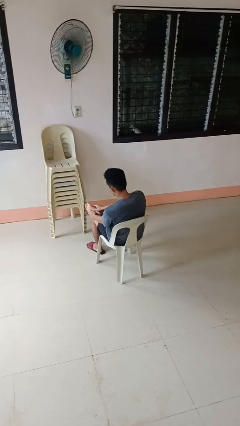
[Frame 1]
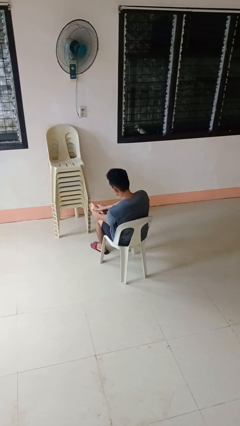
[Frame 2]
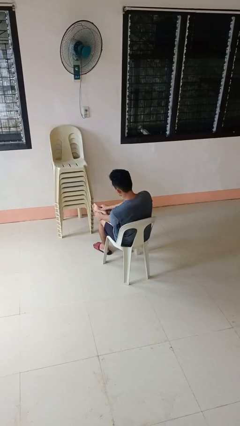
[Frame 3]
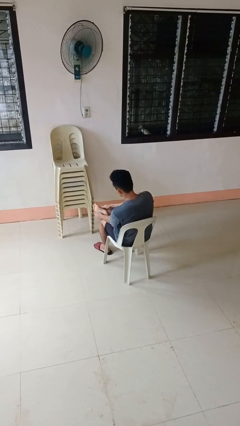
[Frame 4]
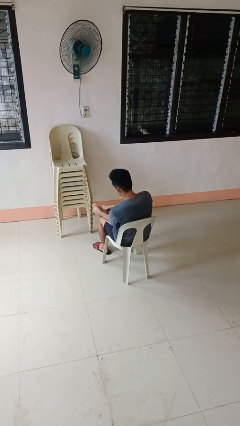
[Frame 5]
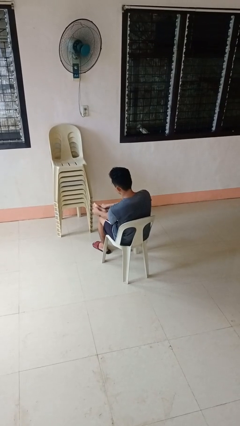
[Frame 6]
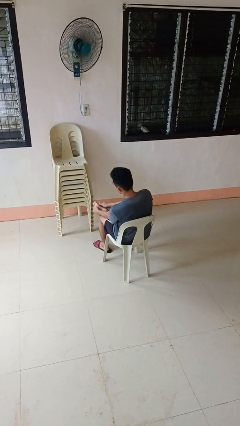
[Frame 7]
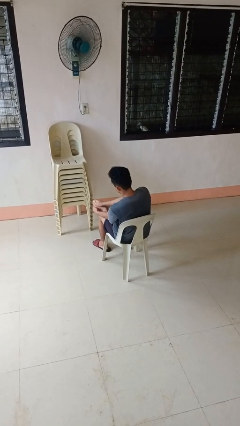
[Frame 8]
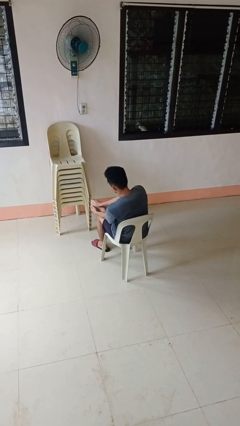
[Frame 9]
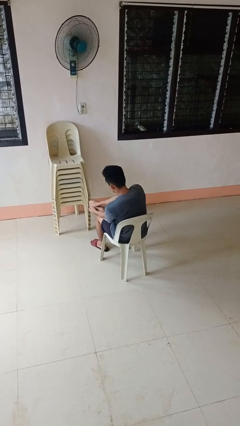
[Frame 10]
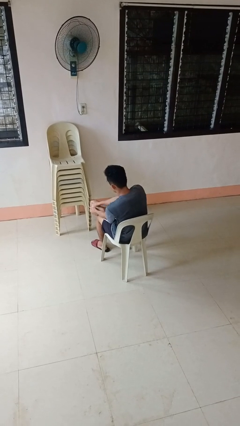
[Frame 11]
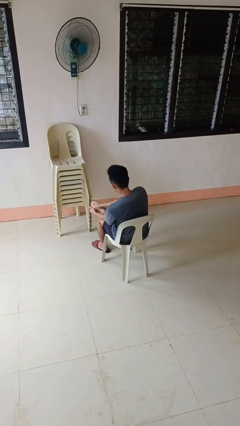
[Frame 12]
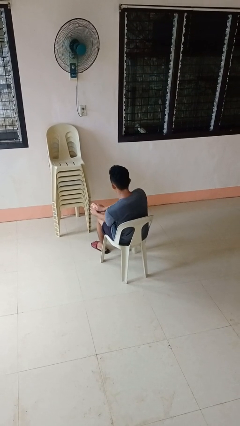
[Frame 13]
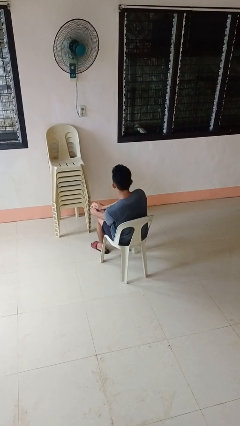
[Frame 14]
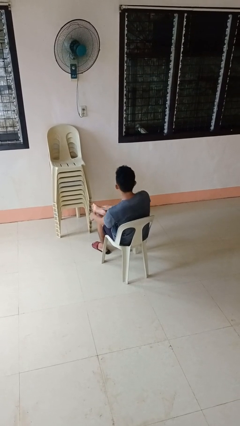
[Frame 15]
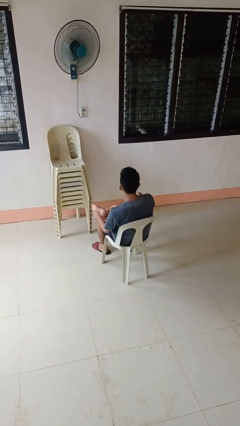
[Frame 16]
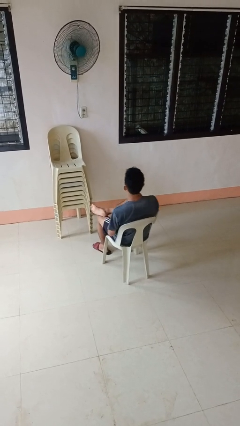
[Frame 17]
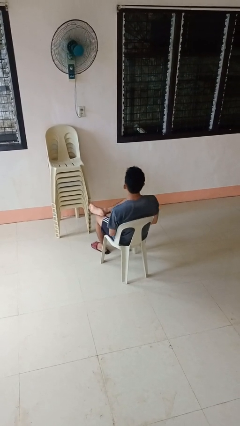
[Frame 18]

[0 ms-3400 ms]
person rubs foot

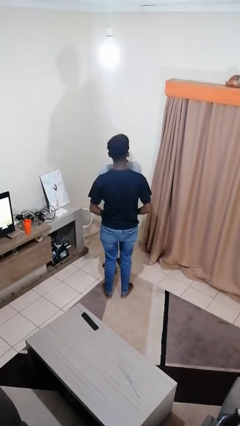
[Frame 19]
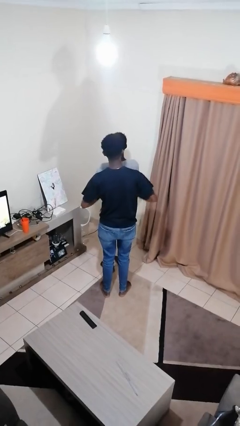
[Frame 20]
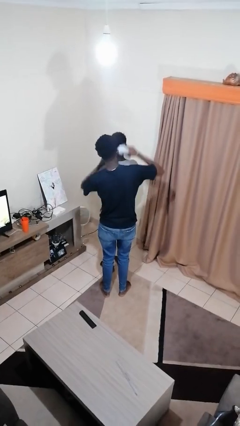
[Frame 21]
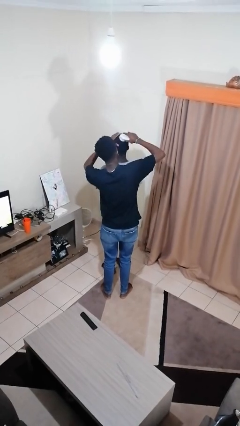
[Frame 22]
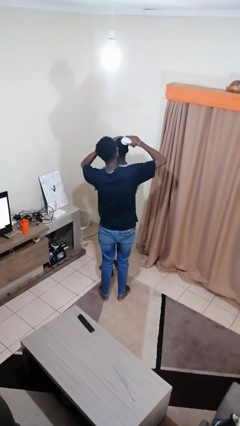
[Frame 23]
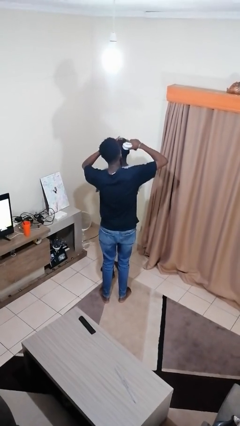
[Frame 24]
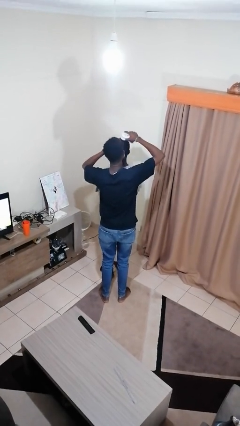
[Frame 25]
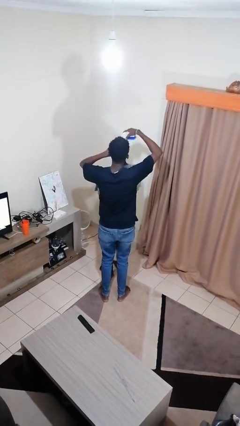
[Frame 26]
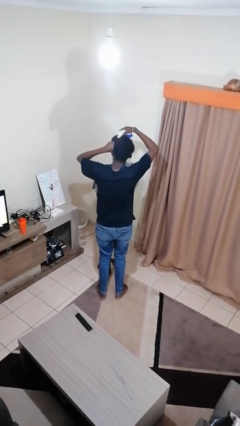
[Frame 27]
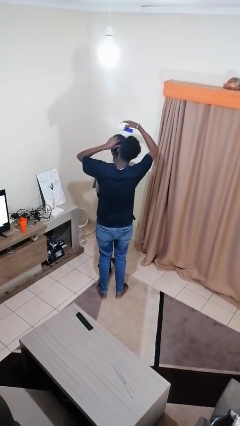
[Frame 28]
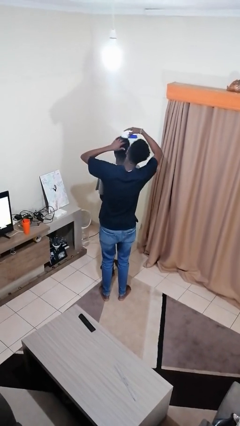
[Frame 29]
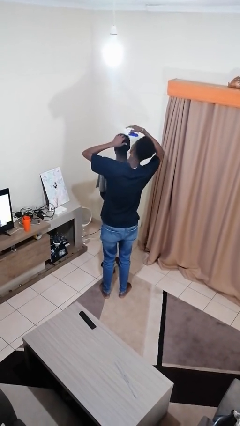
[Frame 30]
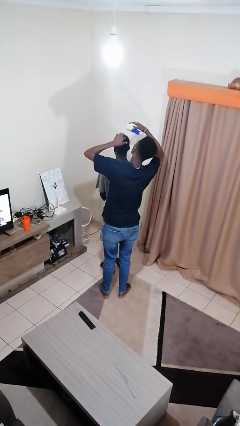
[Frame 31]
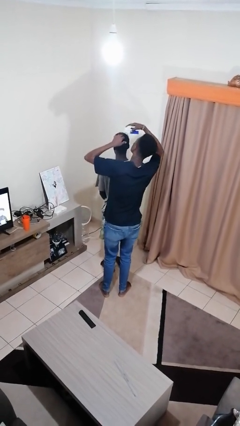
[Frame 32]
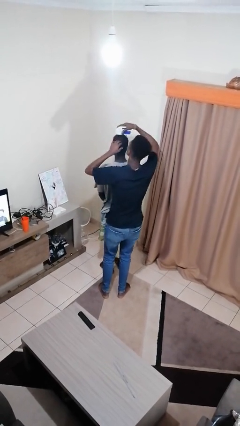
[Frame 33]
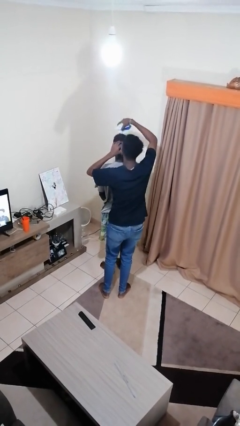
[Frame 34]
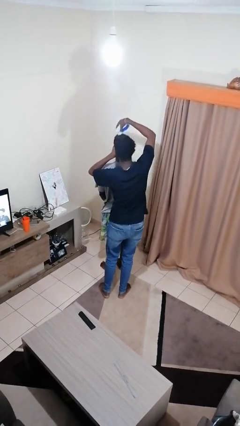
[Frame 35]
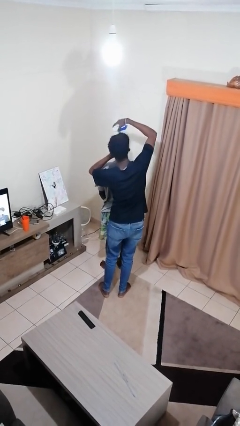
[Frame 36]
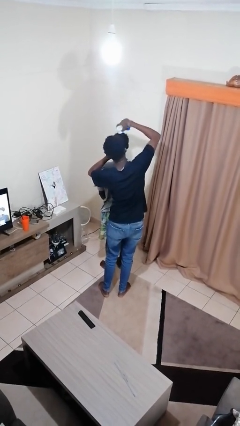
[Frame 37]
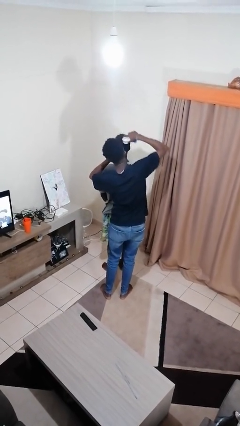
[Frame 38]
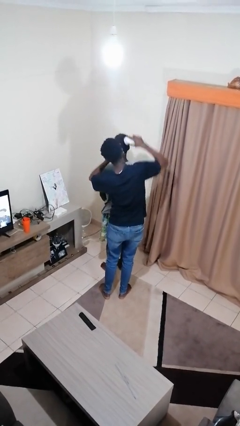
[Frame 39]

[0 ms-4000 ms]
person brushes hair of person

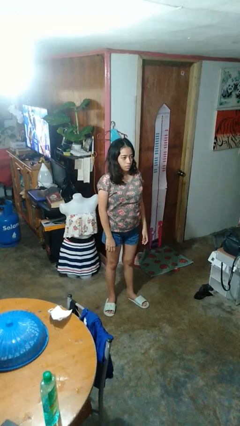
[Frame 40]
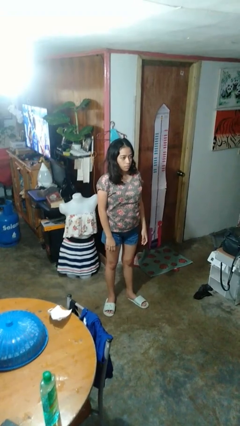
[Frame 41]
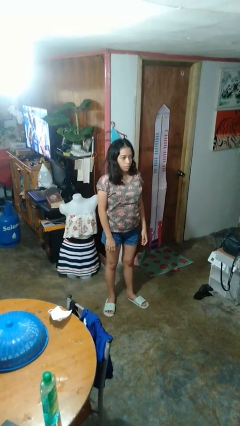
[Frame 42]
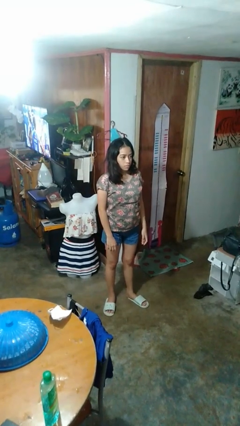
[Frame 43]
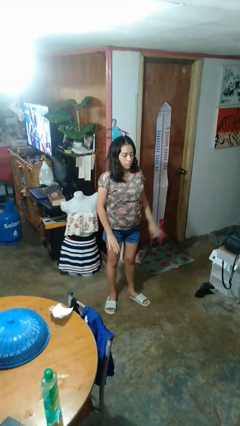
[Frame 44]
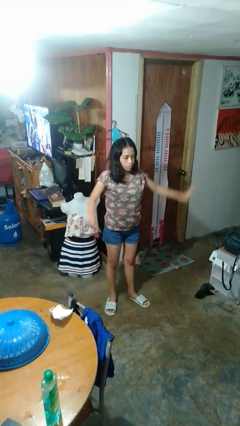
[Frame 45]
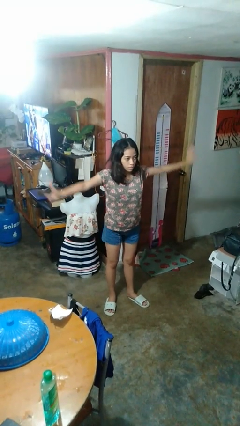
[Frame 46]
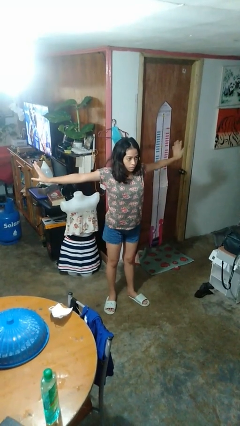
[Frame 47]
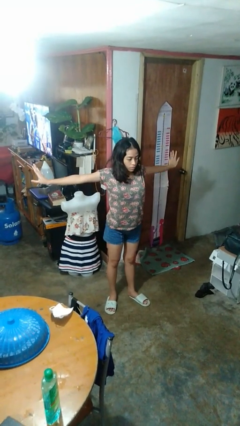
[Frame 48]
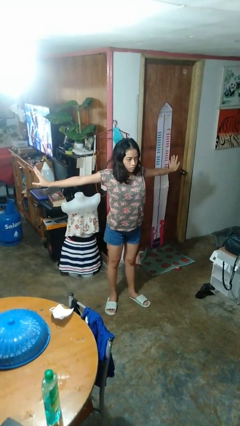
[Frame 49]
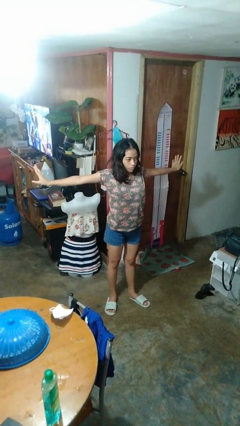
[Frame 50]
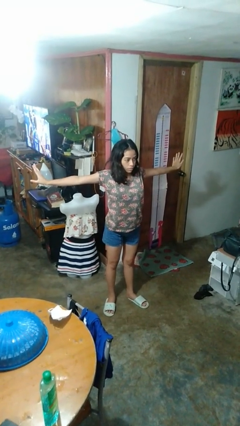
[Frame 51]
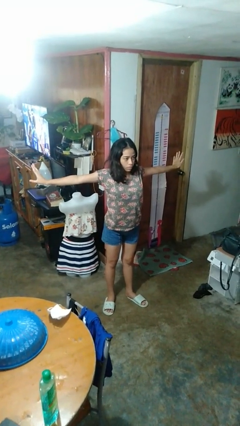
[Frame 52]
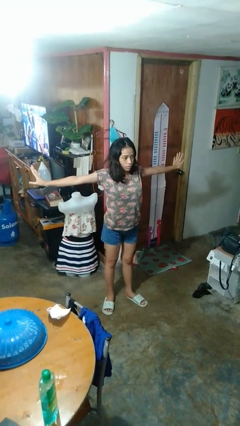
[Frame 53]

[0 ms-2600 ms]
person stretches arms to side

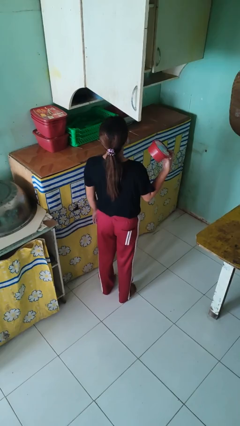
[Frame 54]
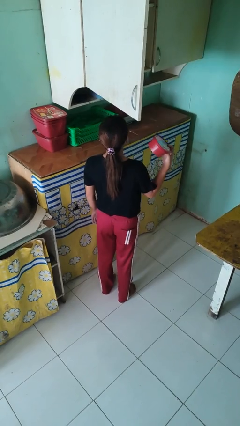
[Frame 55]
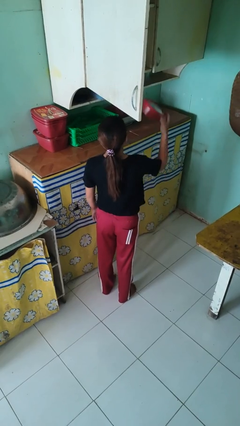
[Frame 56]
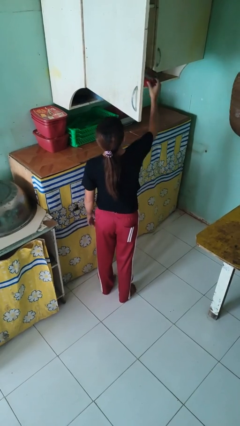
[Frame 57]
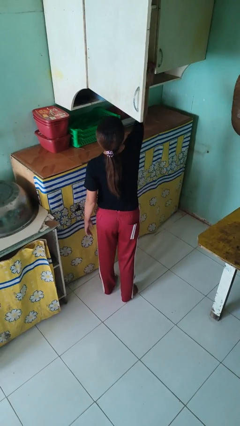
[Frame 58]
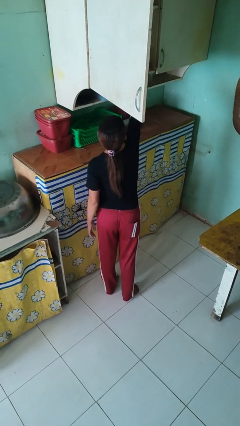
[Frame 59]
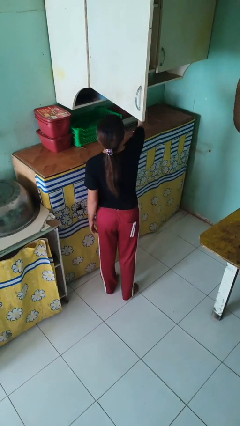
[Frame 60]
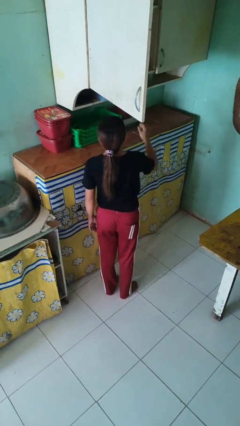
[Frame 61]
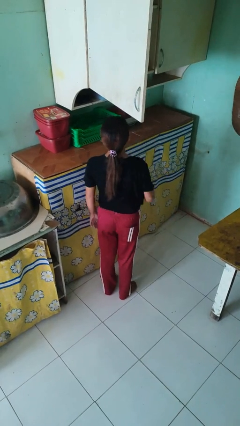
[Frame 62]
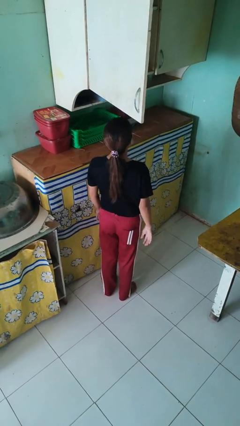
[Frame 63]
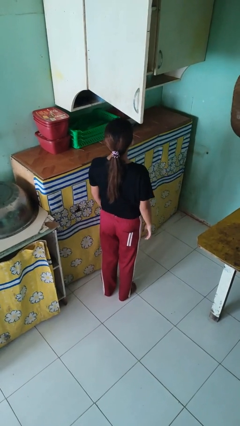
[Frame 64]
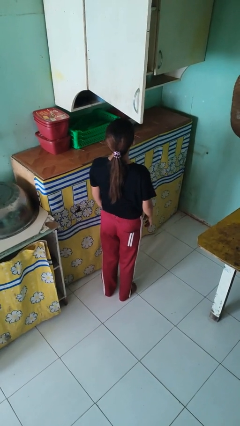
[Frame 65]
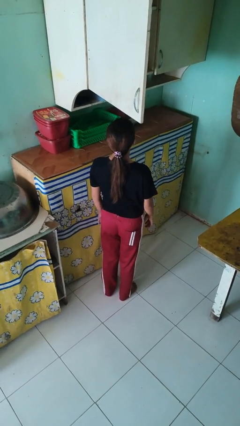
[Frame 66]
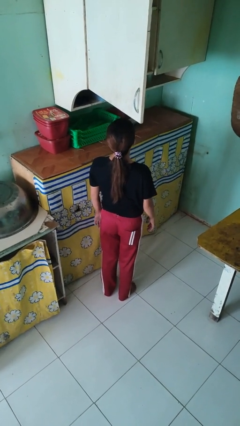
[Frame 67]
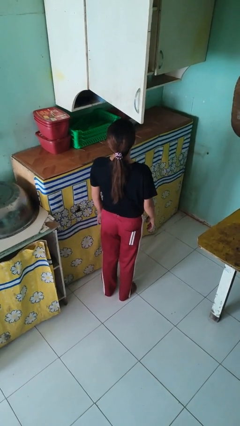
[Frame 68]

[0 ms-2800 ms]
person puts object in cabinet

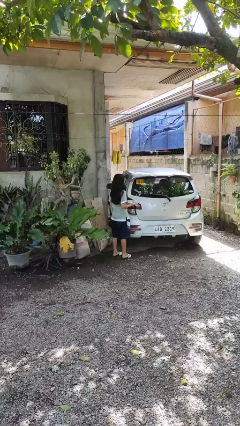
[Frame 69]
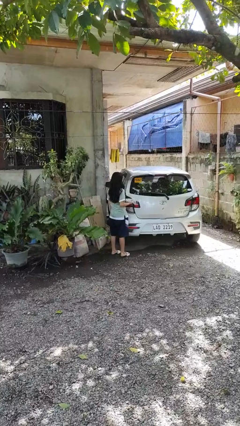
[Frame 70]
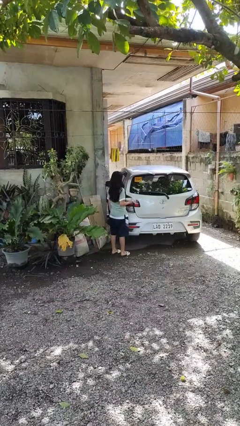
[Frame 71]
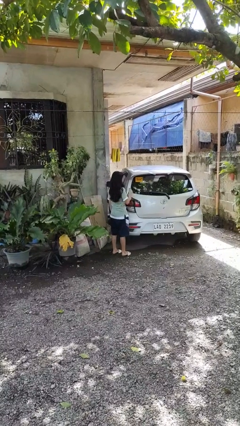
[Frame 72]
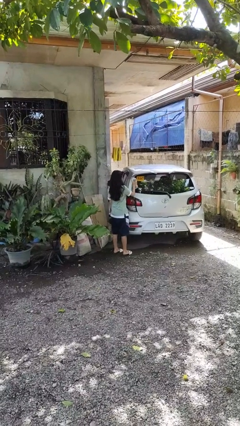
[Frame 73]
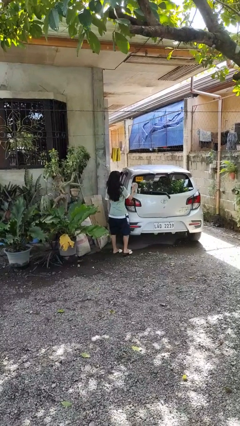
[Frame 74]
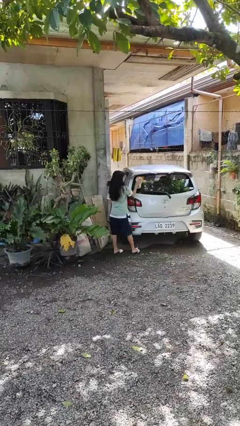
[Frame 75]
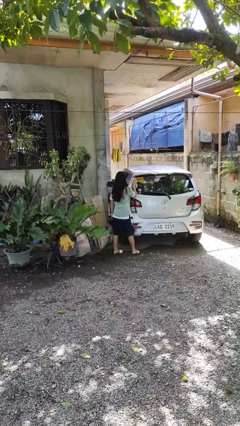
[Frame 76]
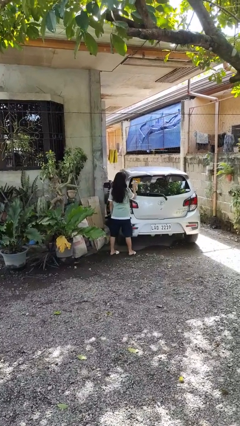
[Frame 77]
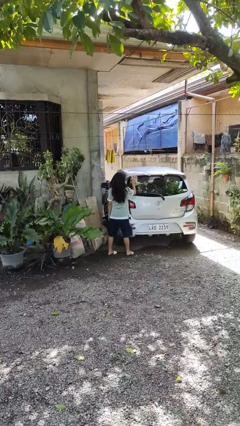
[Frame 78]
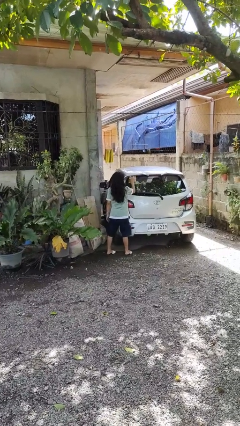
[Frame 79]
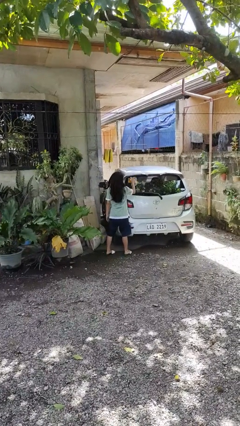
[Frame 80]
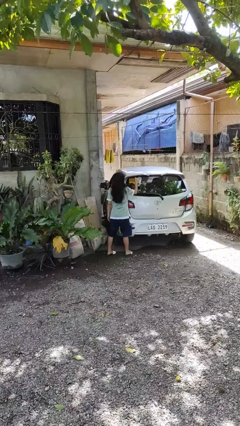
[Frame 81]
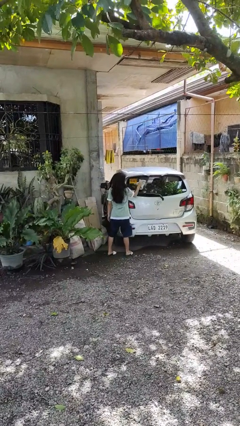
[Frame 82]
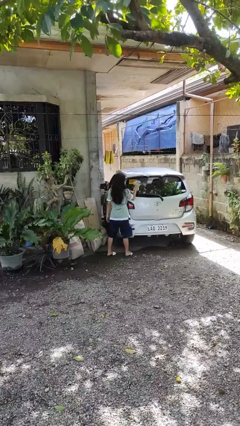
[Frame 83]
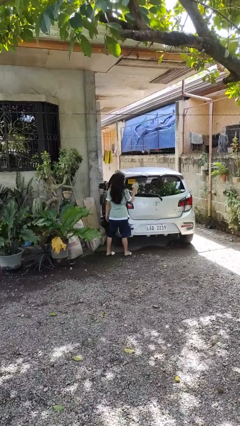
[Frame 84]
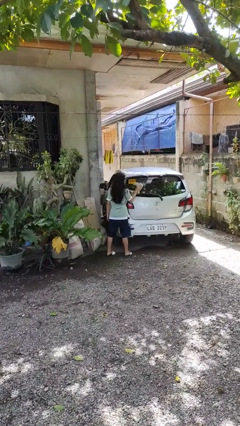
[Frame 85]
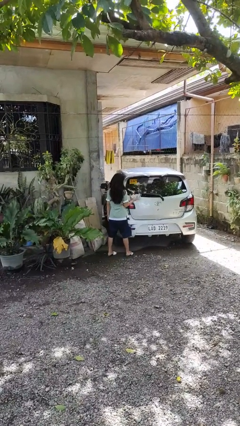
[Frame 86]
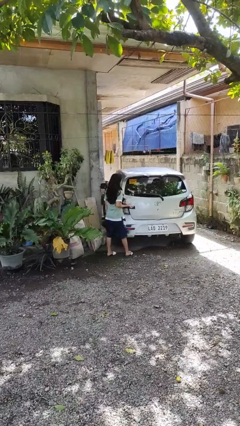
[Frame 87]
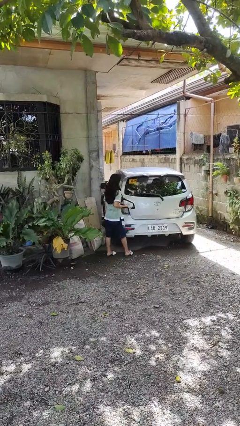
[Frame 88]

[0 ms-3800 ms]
person polishes car with rag

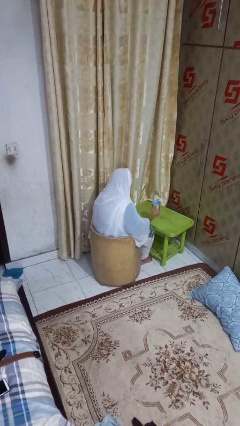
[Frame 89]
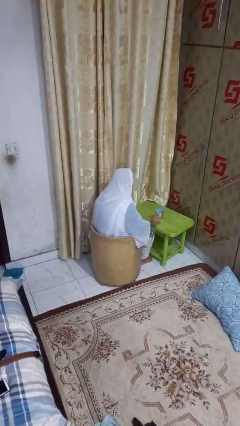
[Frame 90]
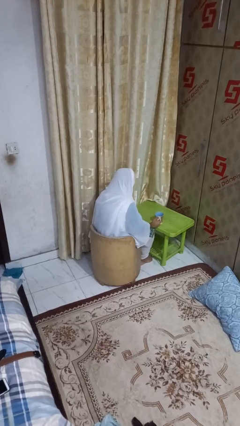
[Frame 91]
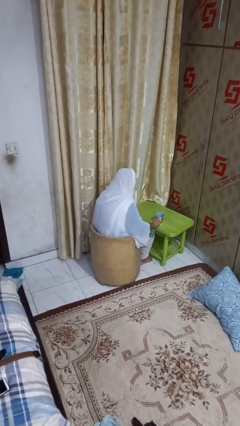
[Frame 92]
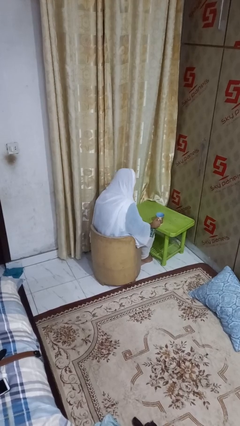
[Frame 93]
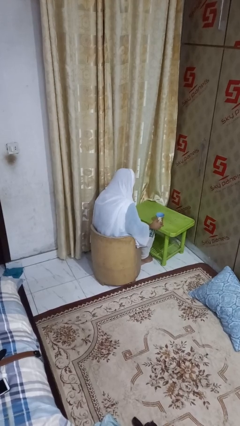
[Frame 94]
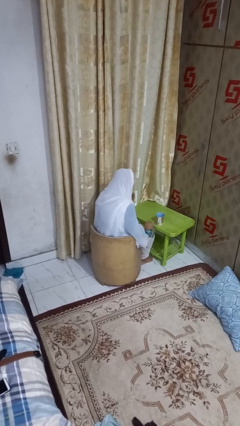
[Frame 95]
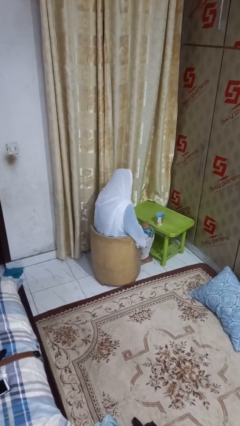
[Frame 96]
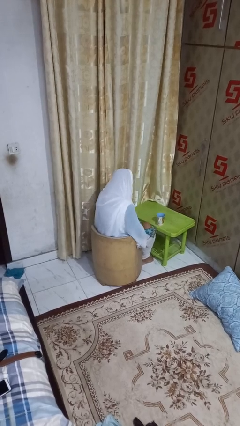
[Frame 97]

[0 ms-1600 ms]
person puts down object on table
